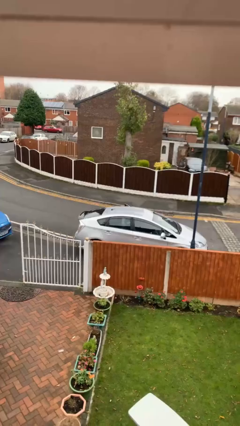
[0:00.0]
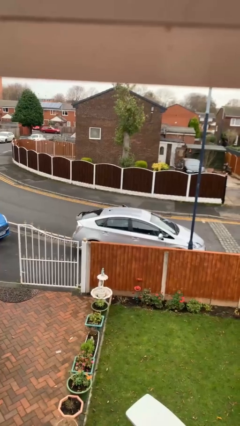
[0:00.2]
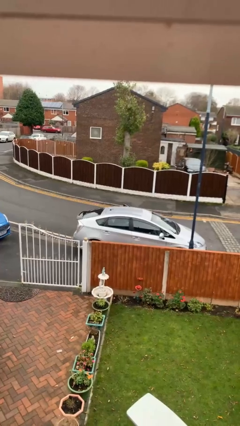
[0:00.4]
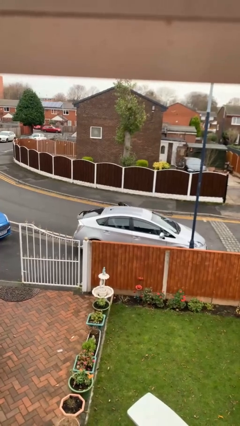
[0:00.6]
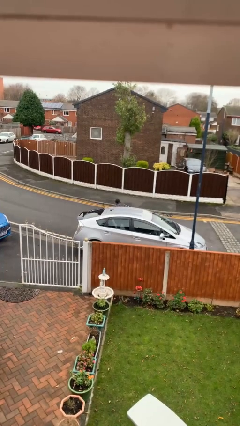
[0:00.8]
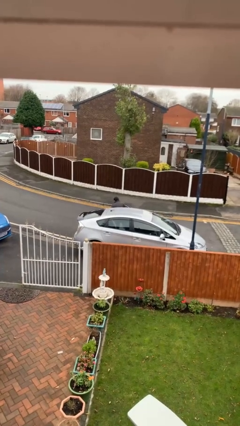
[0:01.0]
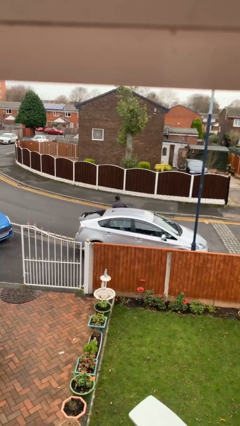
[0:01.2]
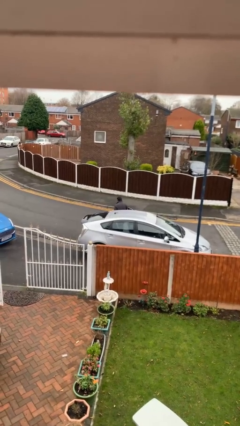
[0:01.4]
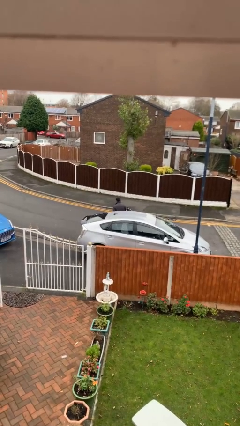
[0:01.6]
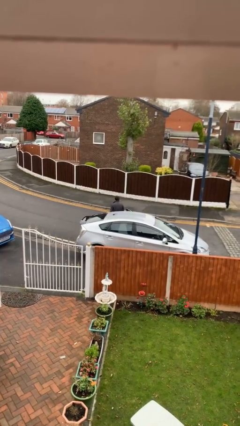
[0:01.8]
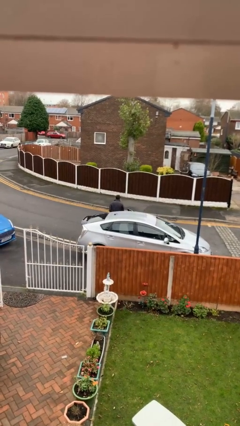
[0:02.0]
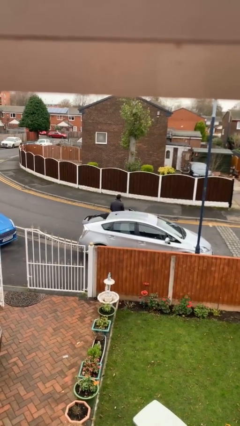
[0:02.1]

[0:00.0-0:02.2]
person exits car

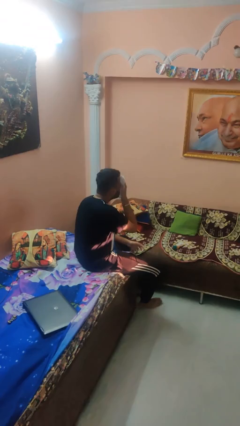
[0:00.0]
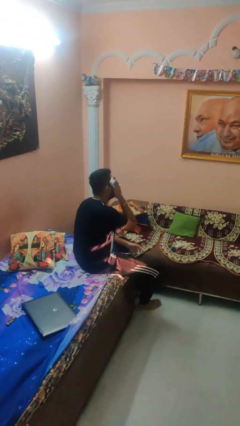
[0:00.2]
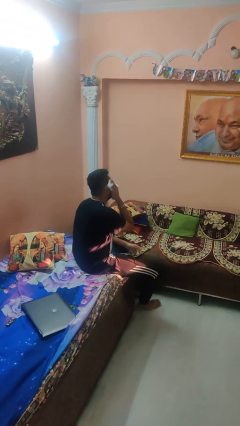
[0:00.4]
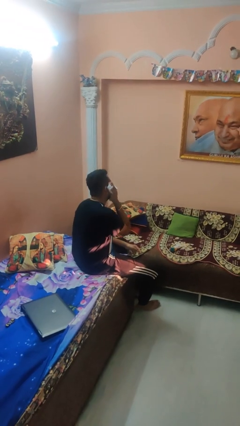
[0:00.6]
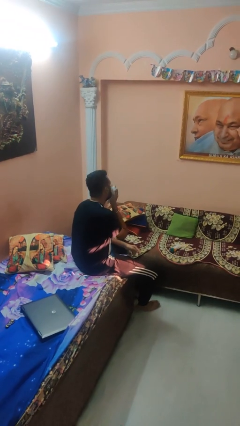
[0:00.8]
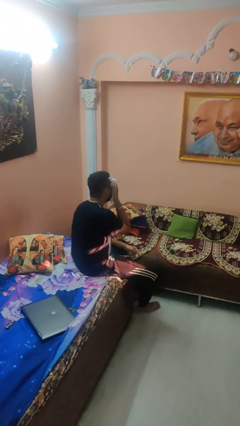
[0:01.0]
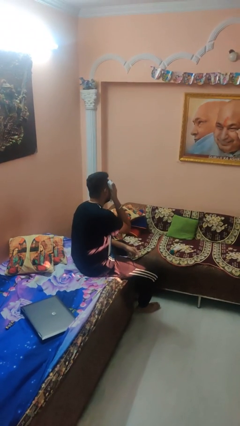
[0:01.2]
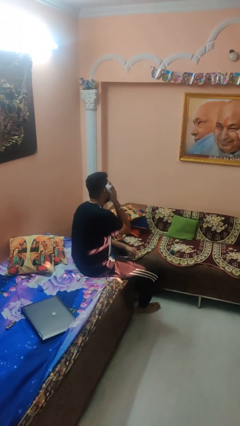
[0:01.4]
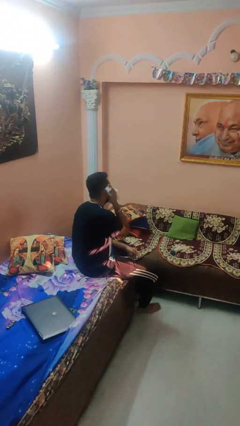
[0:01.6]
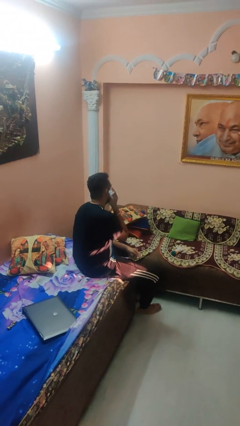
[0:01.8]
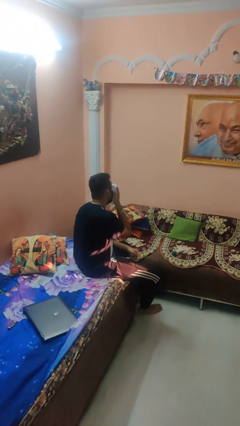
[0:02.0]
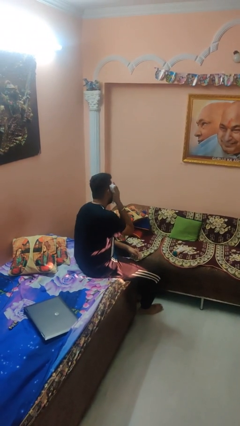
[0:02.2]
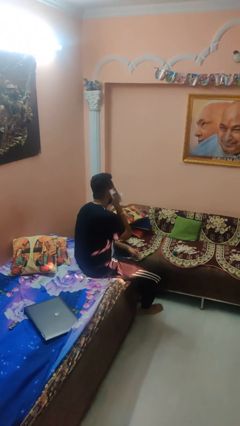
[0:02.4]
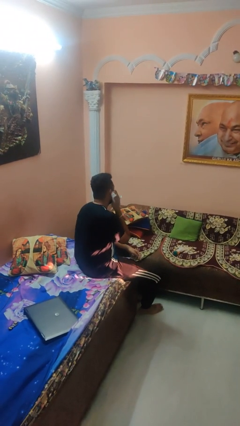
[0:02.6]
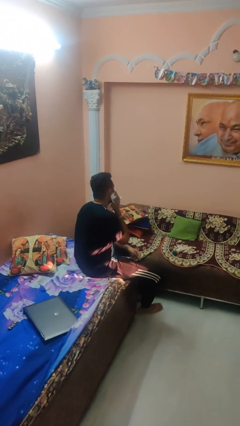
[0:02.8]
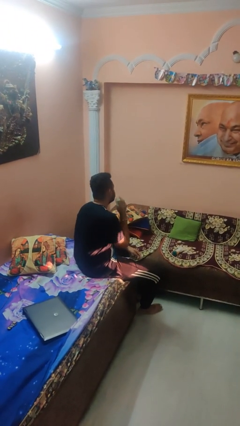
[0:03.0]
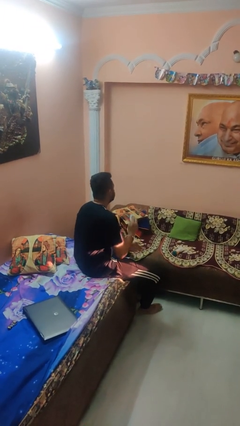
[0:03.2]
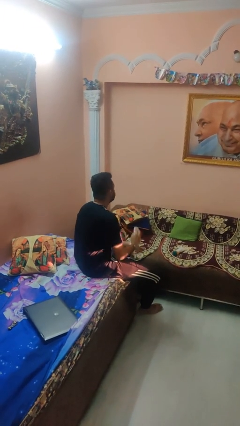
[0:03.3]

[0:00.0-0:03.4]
person wipes mouth with napkin

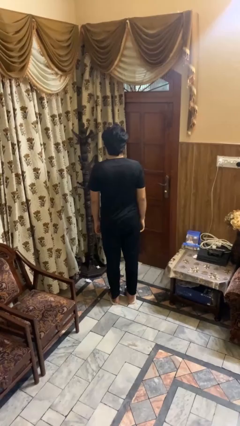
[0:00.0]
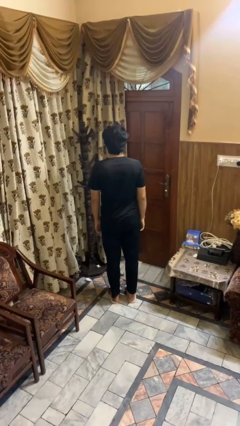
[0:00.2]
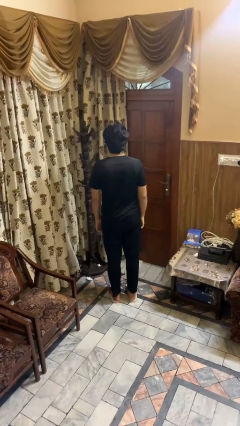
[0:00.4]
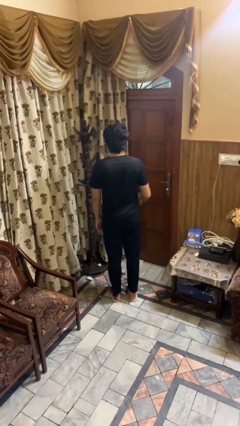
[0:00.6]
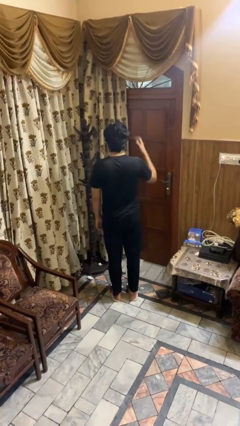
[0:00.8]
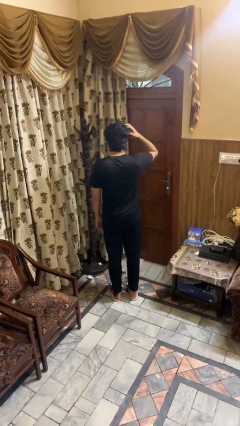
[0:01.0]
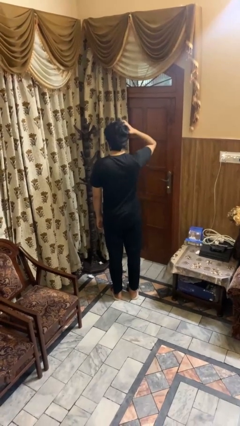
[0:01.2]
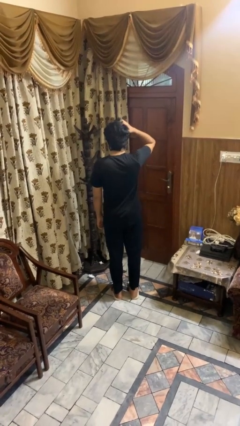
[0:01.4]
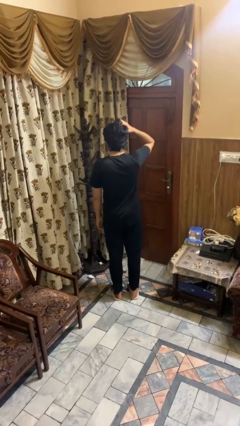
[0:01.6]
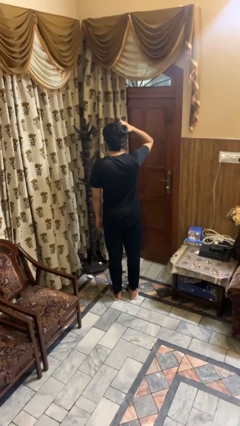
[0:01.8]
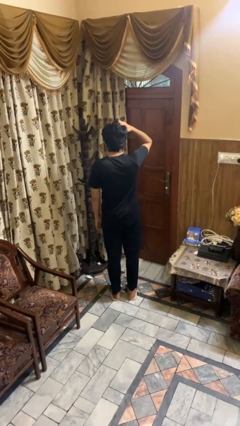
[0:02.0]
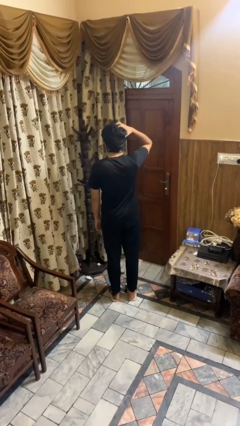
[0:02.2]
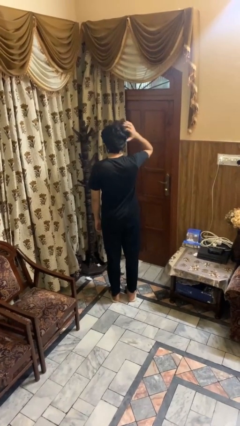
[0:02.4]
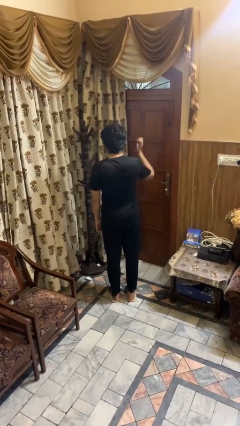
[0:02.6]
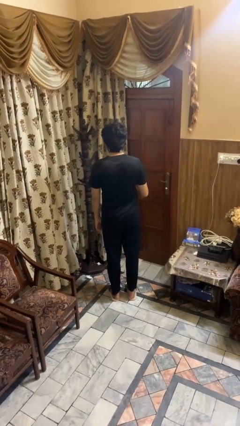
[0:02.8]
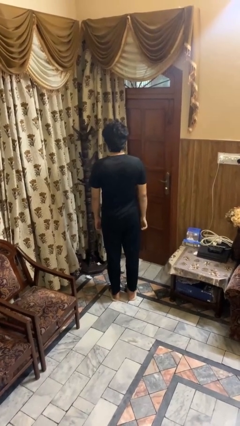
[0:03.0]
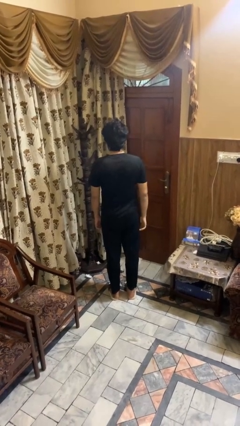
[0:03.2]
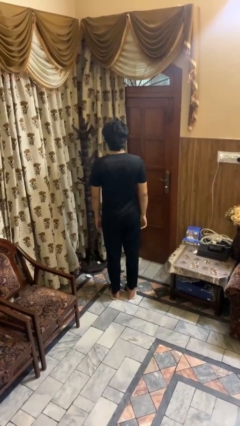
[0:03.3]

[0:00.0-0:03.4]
person scratches face

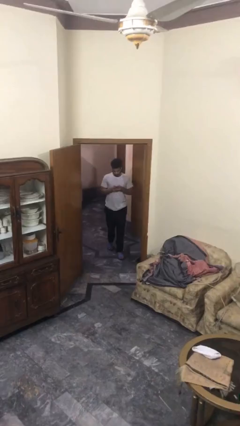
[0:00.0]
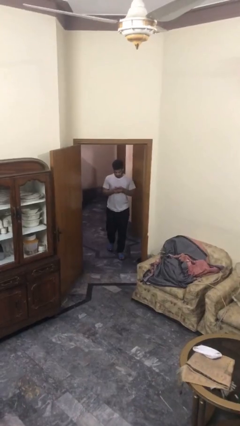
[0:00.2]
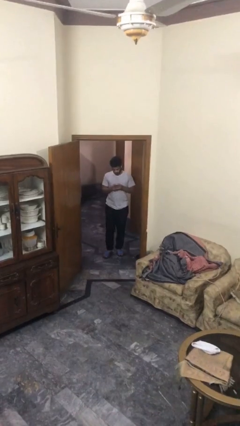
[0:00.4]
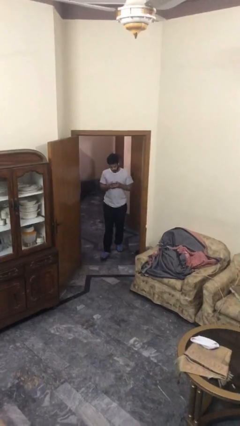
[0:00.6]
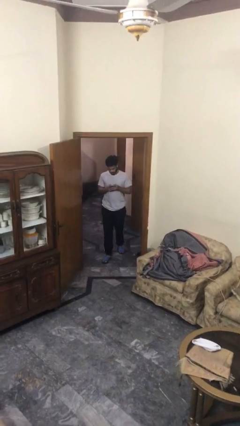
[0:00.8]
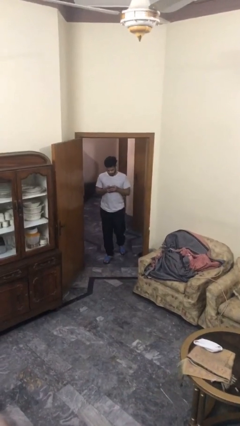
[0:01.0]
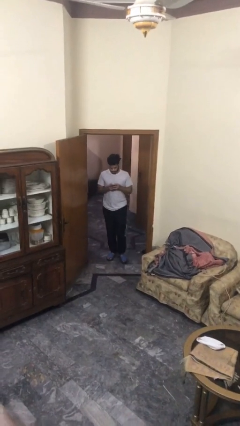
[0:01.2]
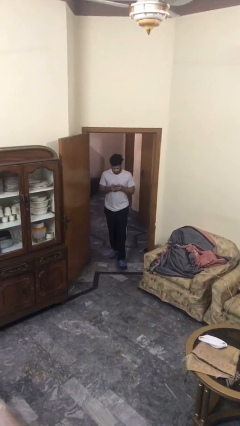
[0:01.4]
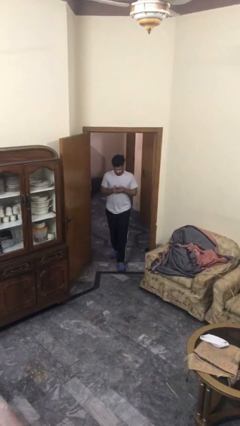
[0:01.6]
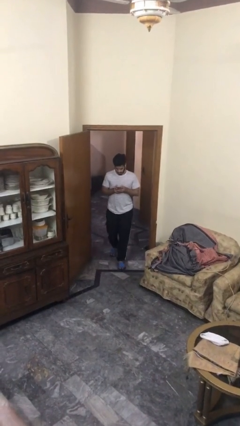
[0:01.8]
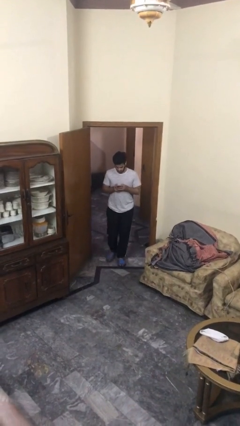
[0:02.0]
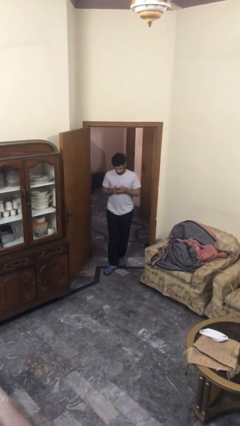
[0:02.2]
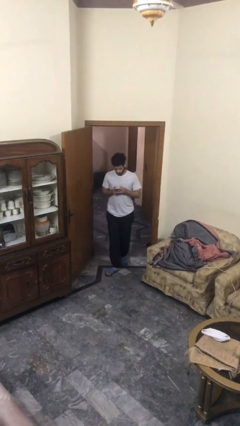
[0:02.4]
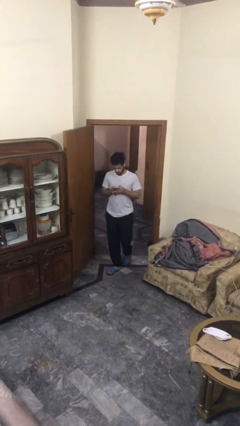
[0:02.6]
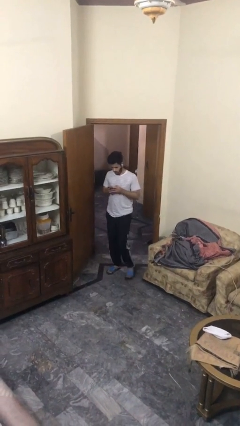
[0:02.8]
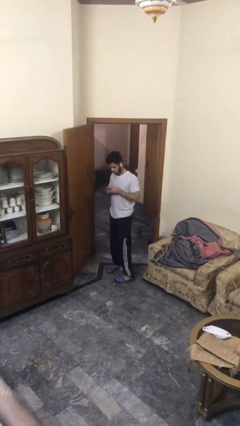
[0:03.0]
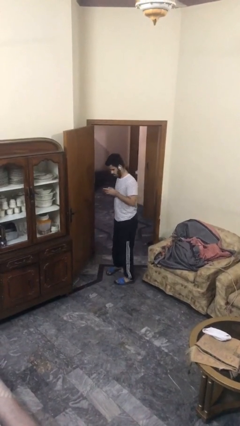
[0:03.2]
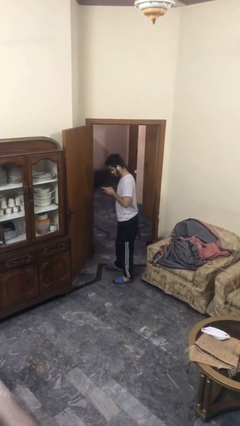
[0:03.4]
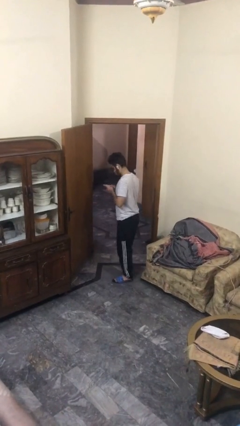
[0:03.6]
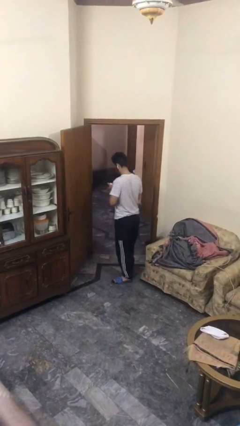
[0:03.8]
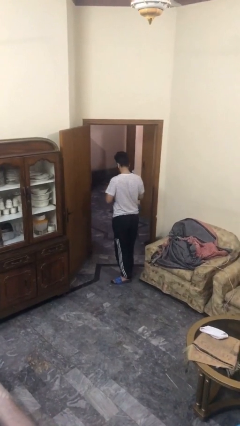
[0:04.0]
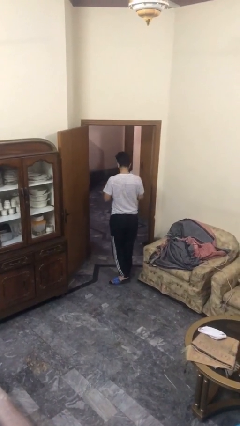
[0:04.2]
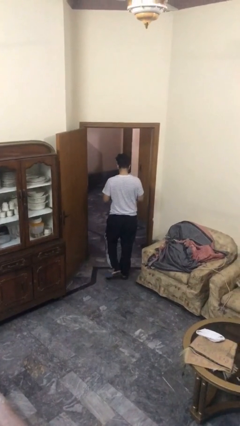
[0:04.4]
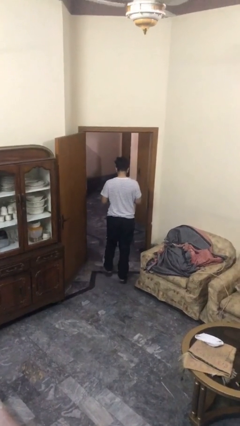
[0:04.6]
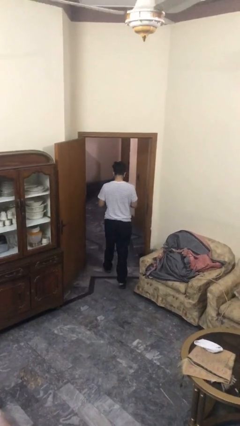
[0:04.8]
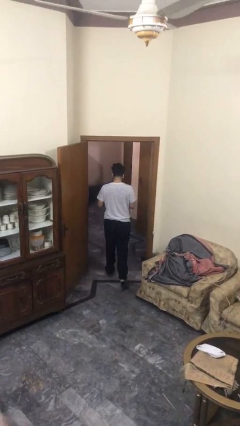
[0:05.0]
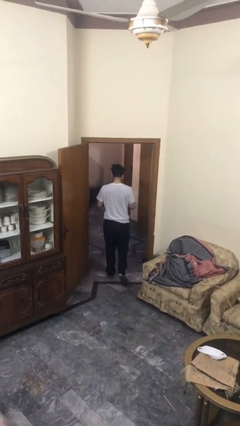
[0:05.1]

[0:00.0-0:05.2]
person enters scene through structure

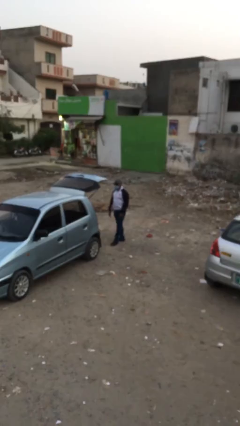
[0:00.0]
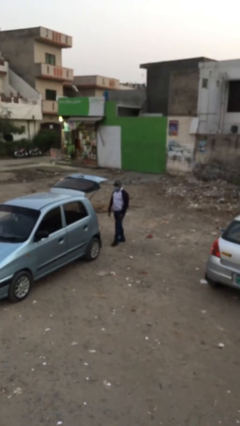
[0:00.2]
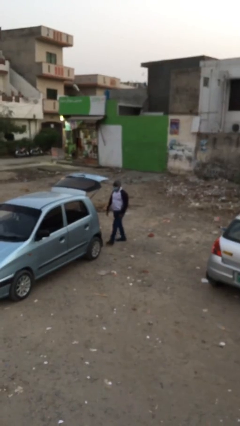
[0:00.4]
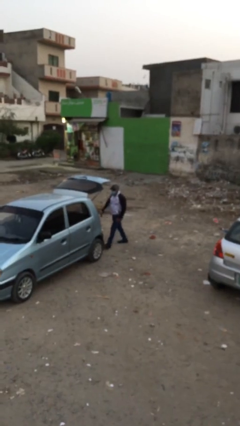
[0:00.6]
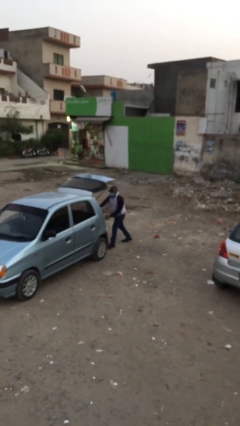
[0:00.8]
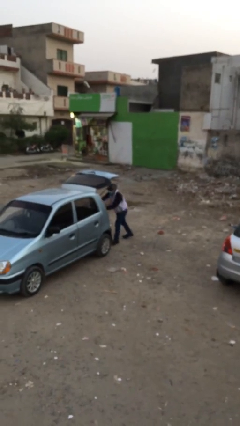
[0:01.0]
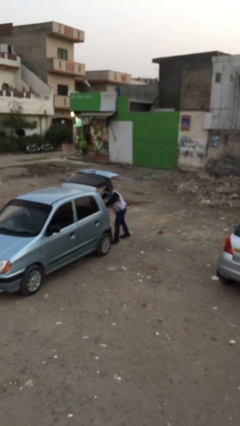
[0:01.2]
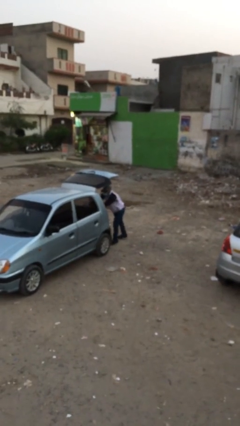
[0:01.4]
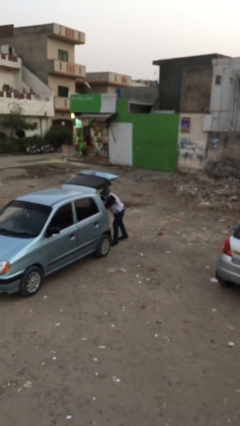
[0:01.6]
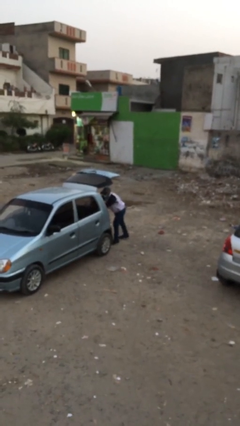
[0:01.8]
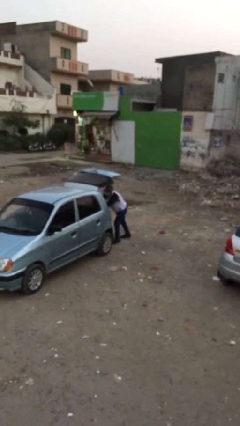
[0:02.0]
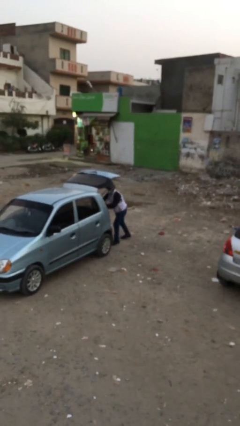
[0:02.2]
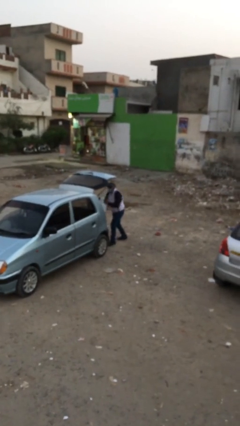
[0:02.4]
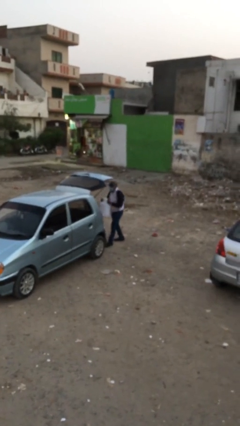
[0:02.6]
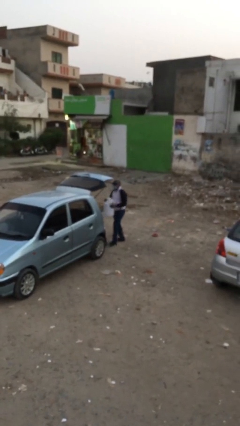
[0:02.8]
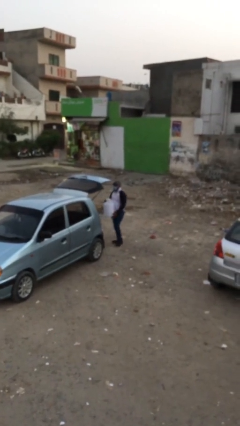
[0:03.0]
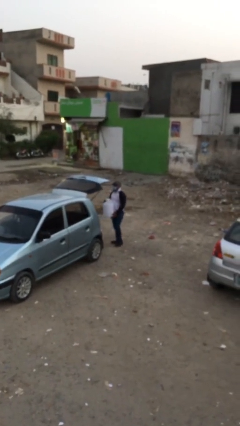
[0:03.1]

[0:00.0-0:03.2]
person unloads car
